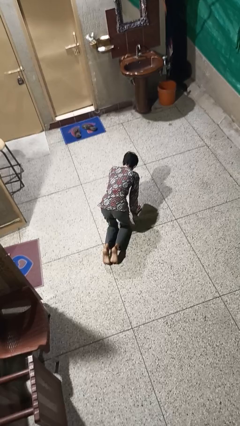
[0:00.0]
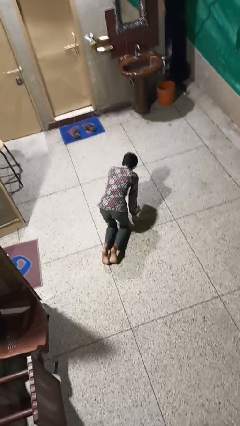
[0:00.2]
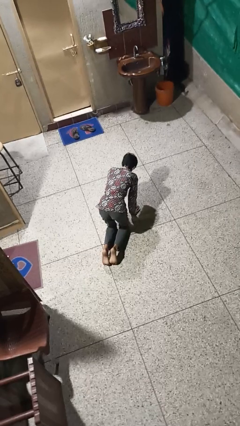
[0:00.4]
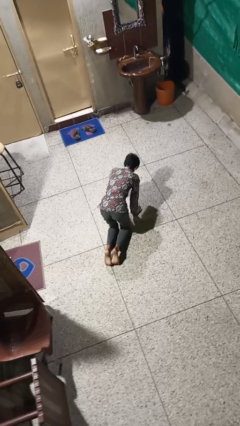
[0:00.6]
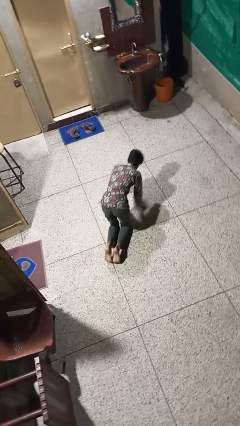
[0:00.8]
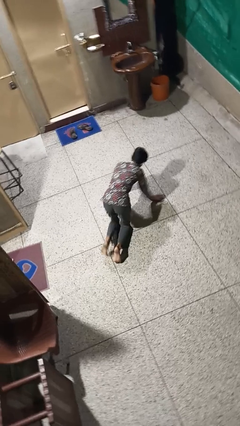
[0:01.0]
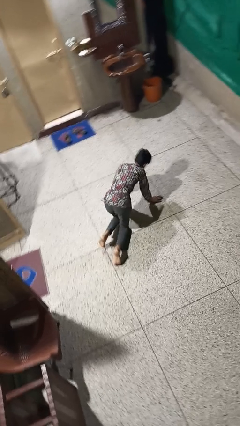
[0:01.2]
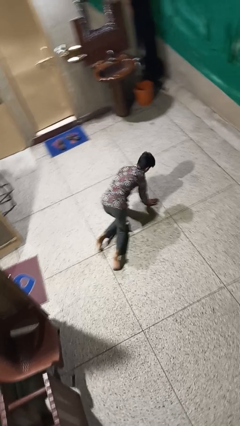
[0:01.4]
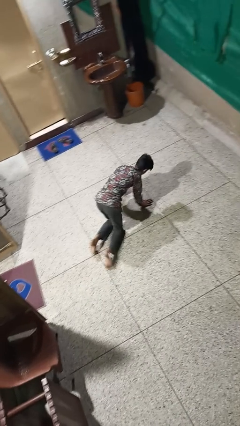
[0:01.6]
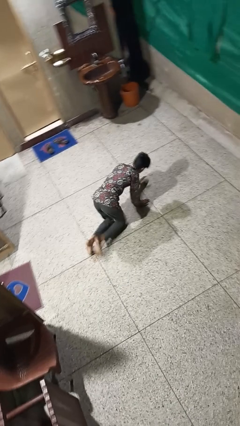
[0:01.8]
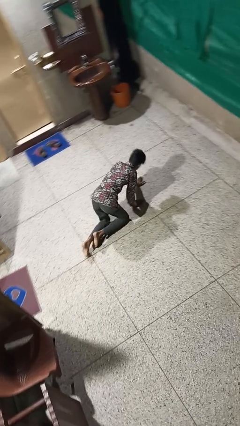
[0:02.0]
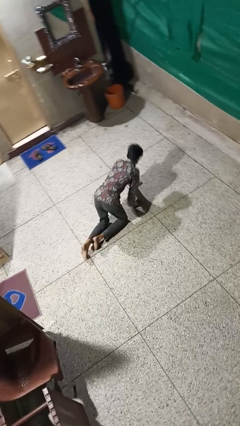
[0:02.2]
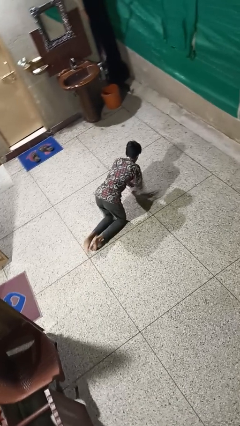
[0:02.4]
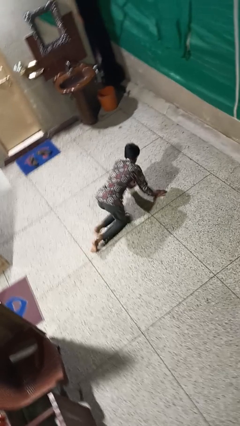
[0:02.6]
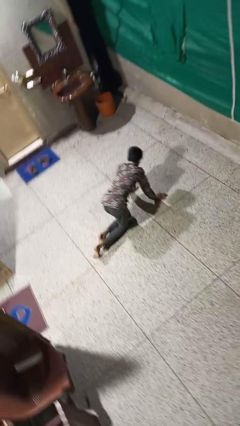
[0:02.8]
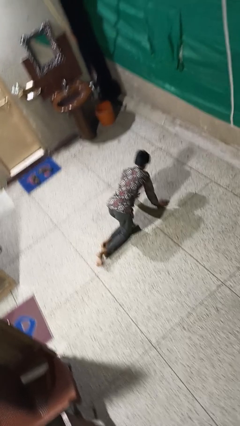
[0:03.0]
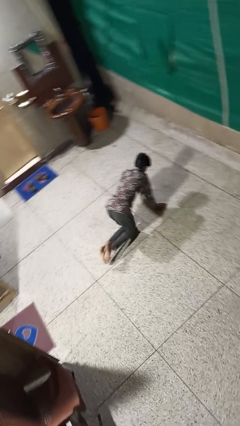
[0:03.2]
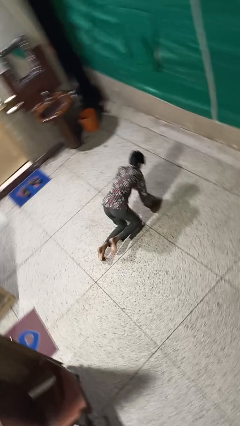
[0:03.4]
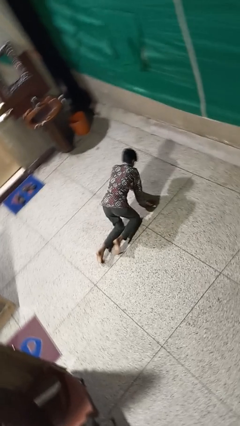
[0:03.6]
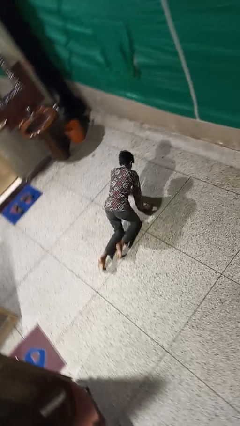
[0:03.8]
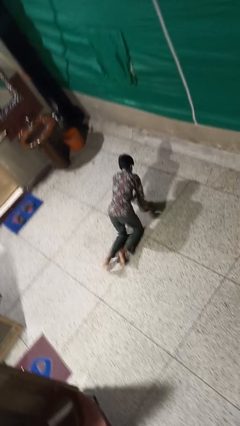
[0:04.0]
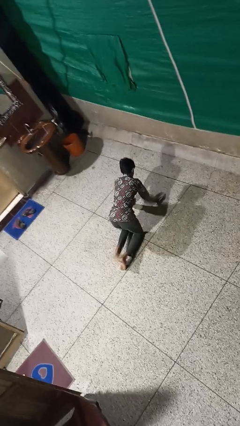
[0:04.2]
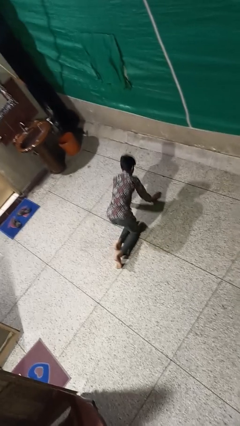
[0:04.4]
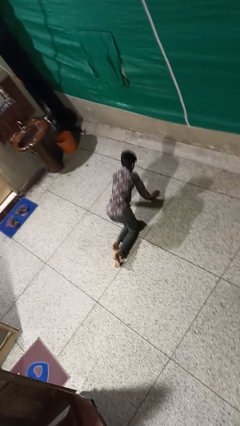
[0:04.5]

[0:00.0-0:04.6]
person crawls

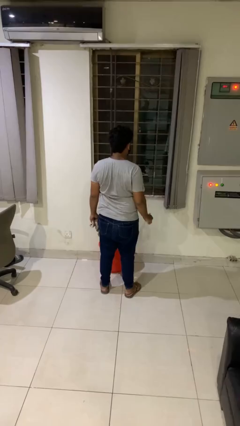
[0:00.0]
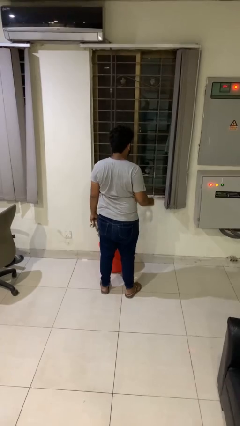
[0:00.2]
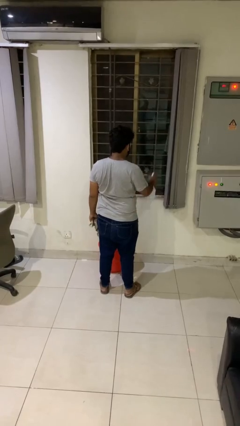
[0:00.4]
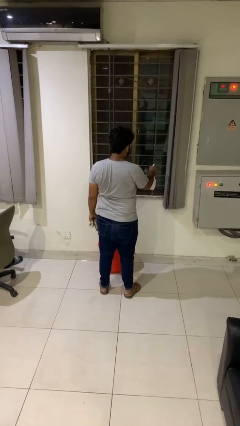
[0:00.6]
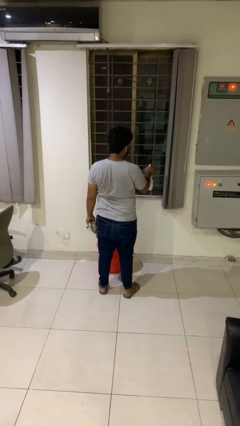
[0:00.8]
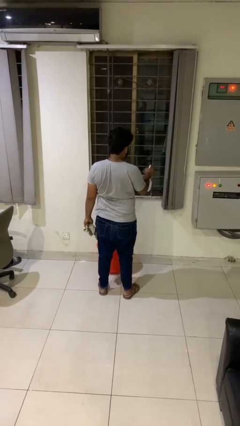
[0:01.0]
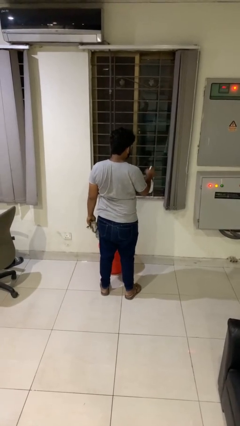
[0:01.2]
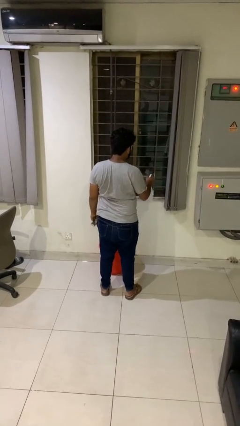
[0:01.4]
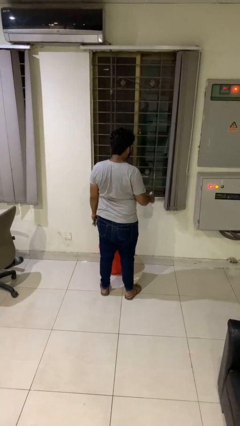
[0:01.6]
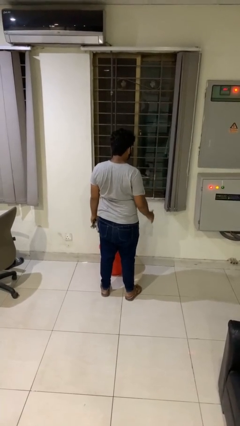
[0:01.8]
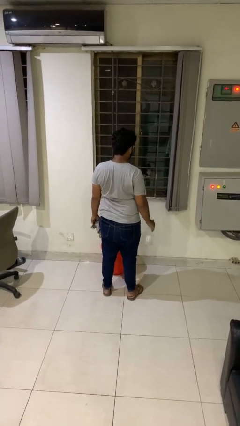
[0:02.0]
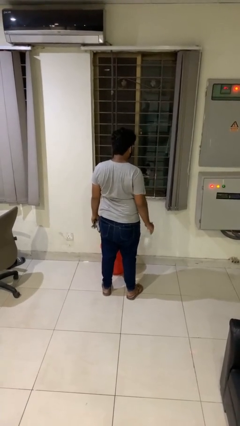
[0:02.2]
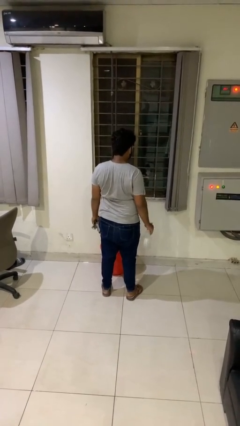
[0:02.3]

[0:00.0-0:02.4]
person sprays from bottle

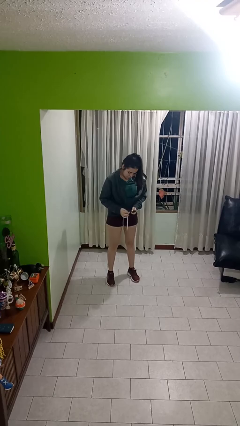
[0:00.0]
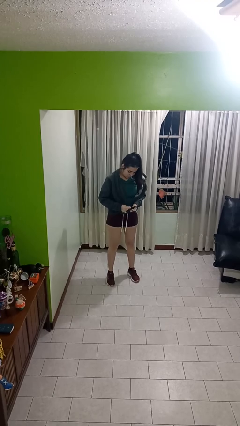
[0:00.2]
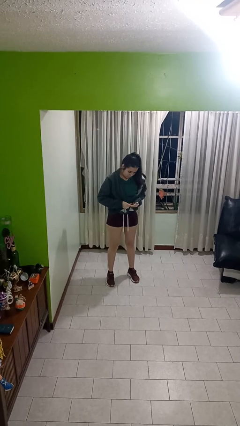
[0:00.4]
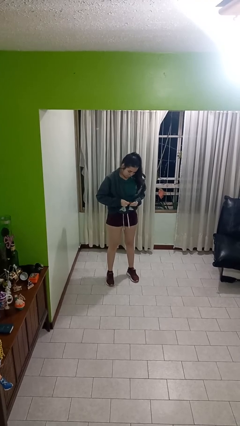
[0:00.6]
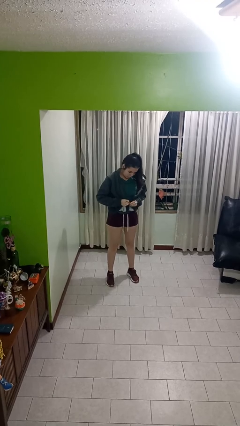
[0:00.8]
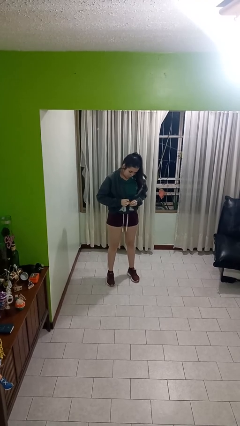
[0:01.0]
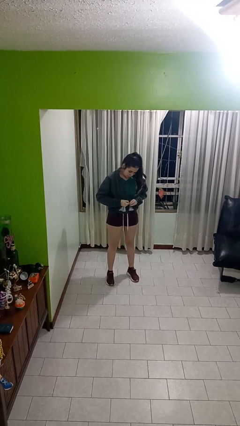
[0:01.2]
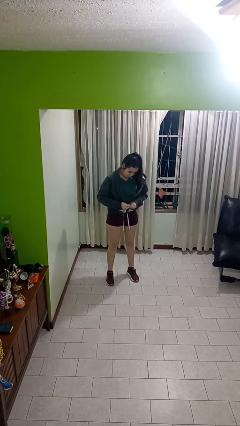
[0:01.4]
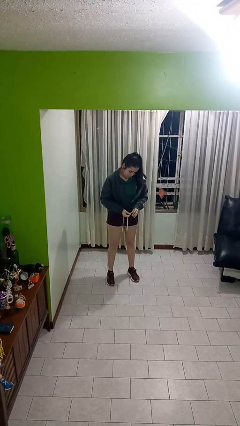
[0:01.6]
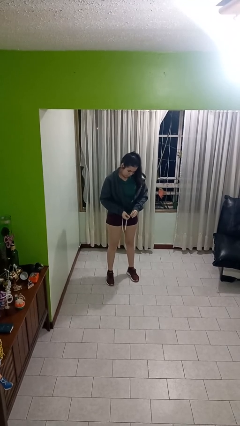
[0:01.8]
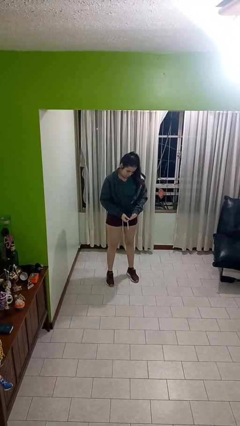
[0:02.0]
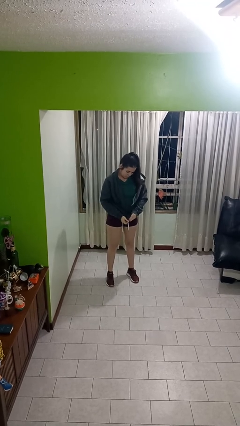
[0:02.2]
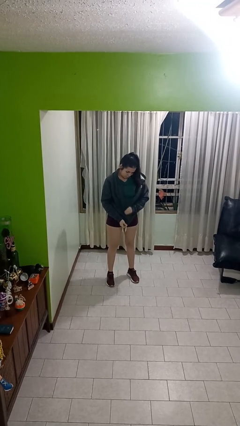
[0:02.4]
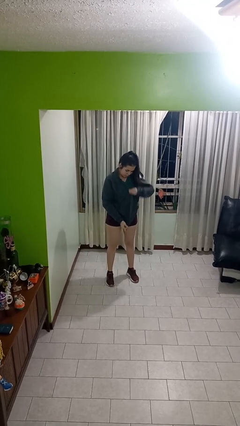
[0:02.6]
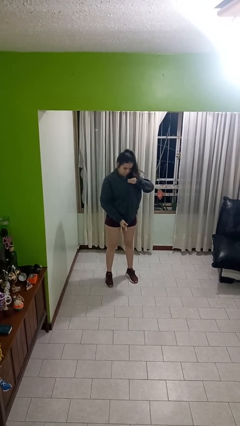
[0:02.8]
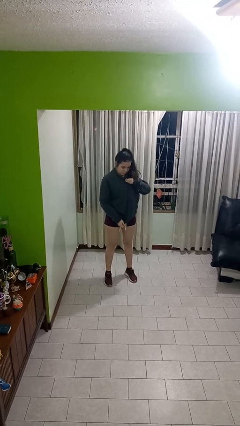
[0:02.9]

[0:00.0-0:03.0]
person zips up jacket

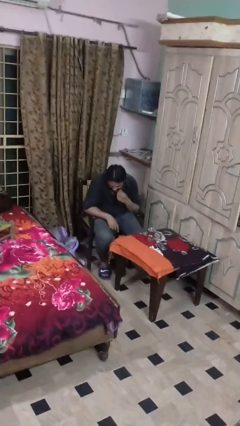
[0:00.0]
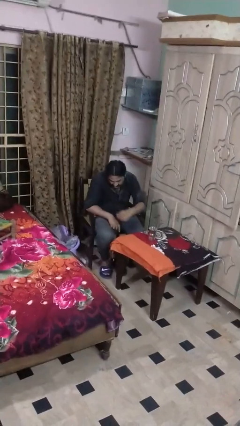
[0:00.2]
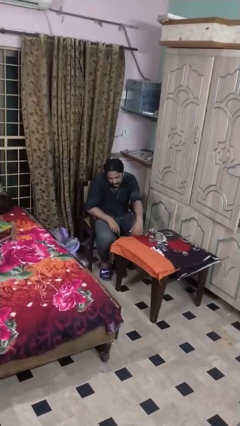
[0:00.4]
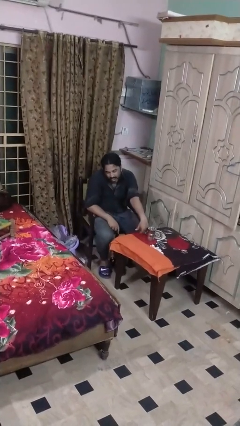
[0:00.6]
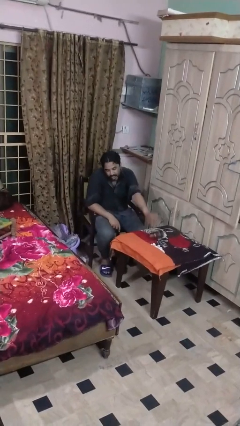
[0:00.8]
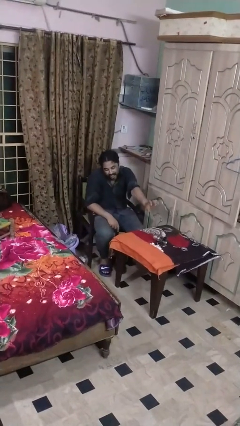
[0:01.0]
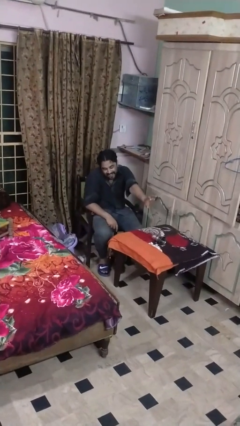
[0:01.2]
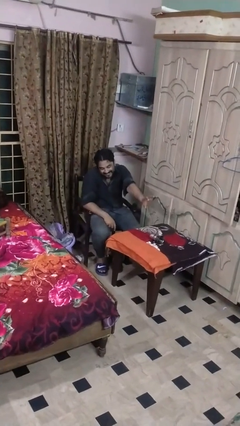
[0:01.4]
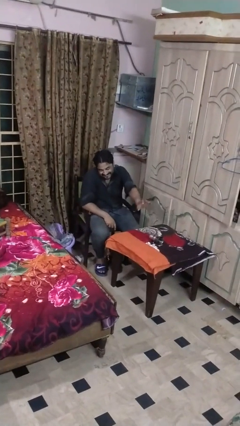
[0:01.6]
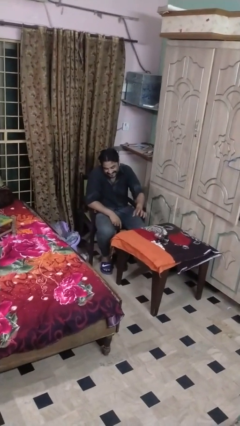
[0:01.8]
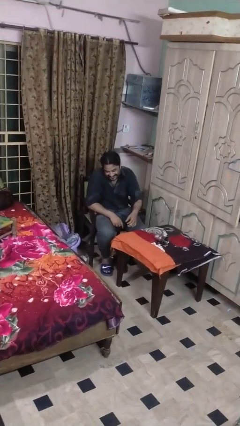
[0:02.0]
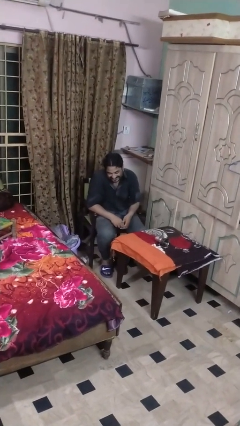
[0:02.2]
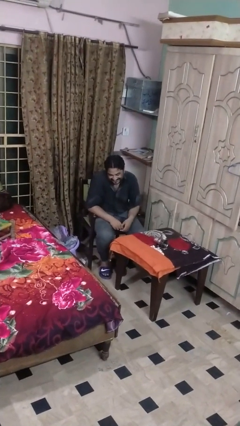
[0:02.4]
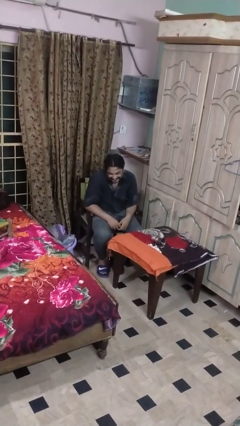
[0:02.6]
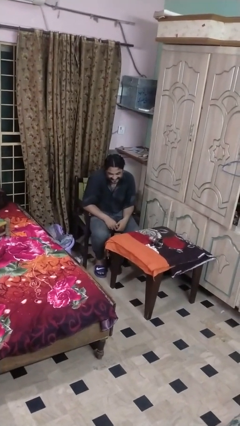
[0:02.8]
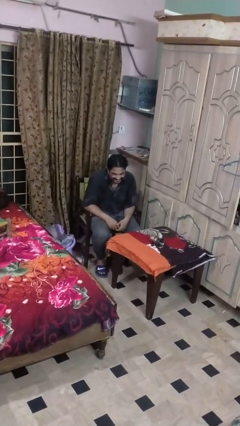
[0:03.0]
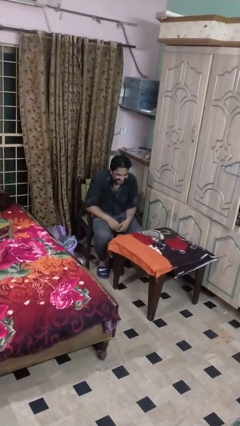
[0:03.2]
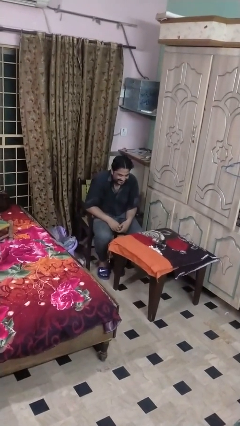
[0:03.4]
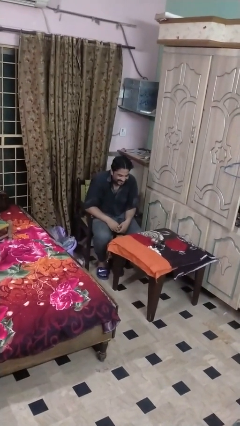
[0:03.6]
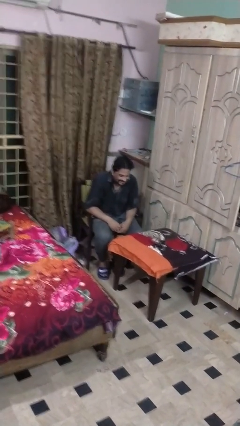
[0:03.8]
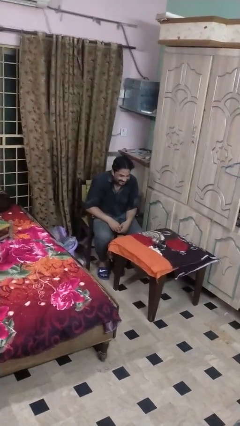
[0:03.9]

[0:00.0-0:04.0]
person knocks over glass

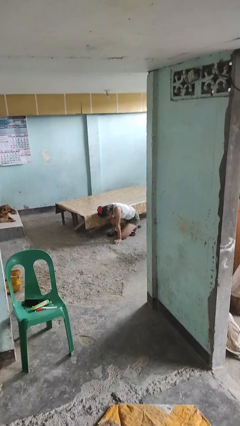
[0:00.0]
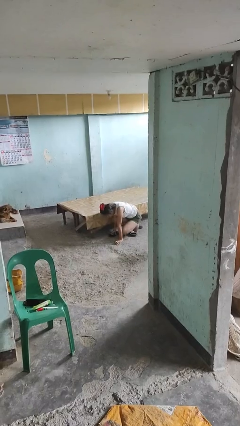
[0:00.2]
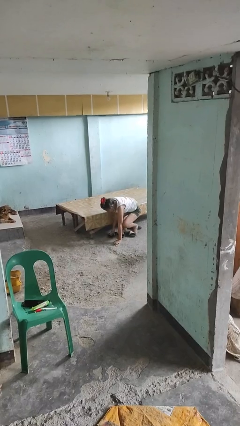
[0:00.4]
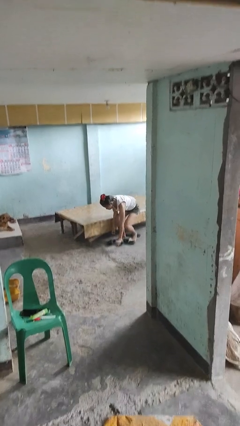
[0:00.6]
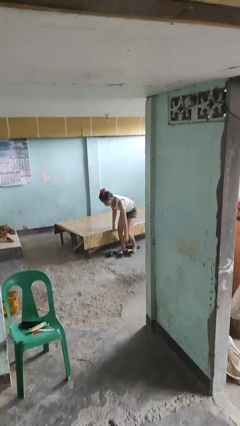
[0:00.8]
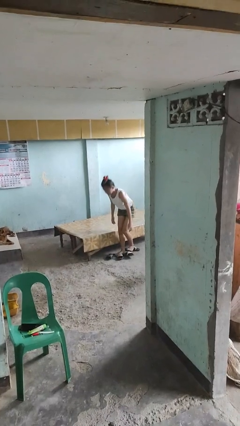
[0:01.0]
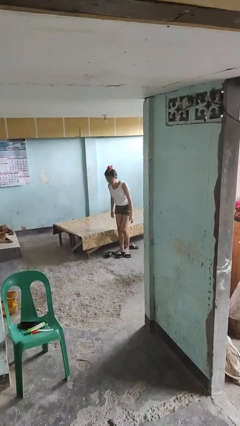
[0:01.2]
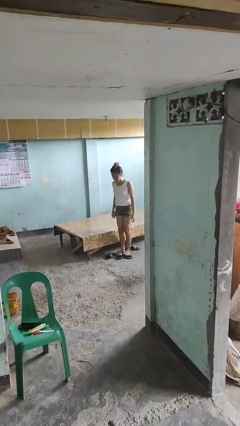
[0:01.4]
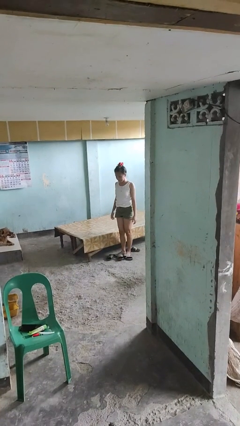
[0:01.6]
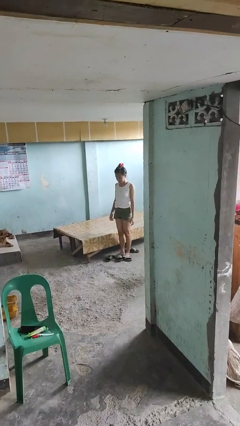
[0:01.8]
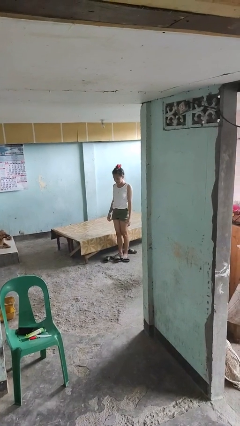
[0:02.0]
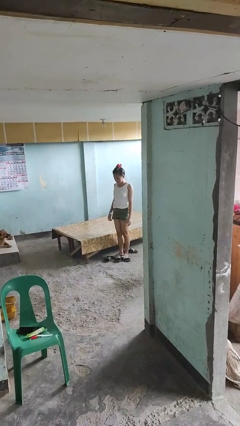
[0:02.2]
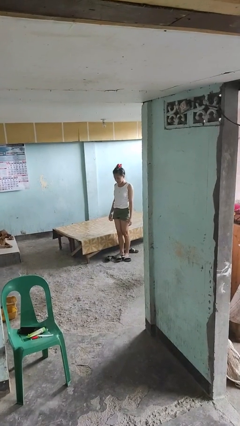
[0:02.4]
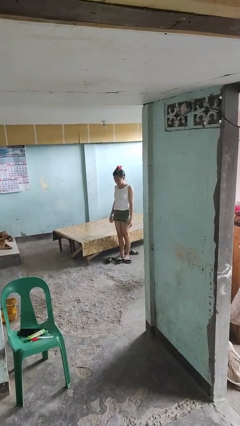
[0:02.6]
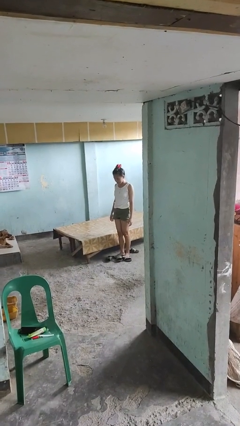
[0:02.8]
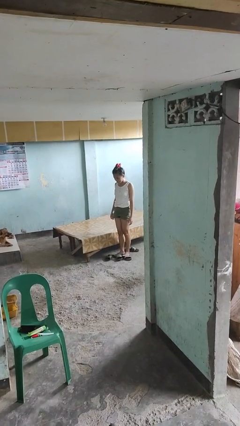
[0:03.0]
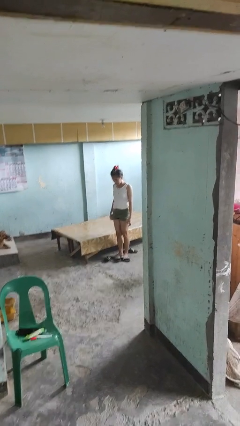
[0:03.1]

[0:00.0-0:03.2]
person stands up from floor

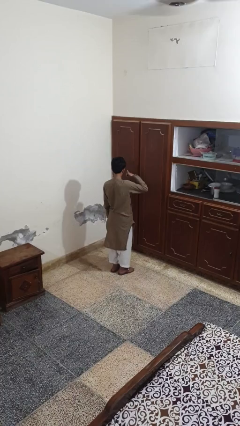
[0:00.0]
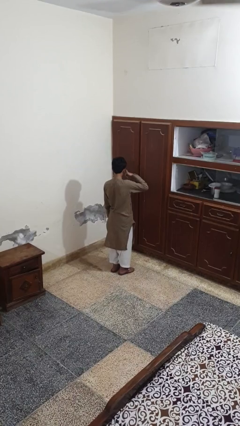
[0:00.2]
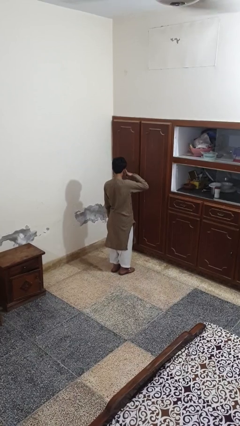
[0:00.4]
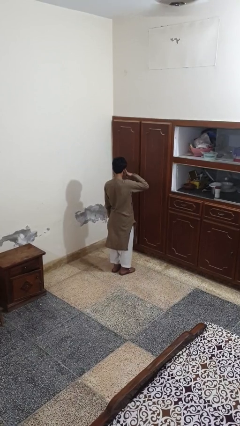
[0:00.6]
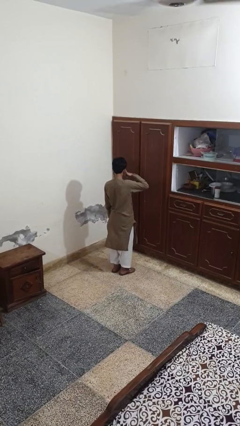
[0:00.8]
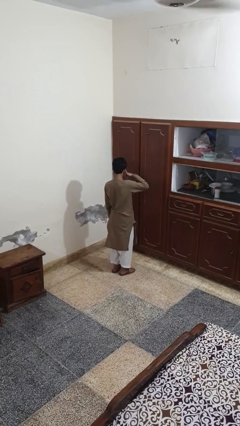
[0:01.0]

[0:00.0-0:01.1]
person gestures call me
